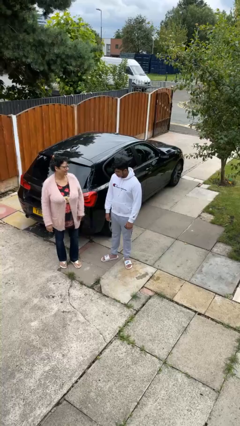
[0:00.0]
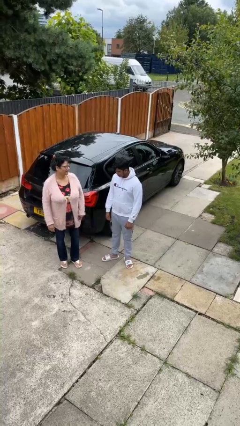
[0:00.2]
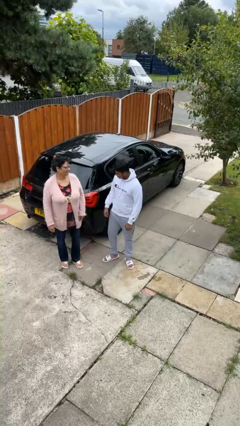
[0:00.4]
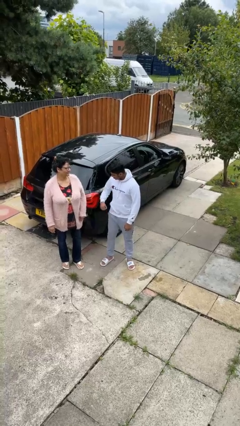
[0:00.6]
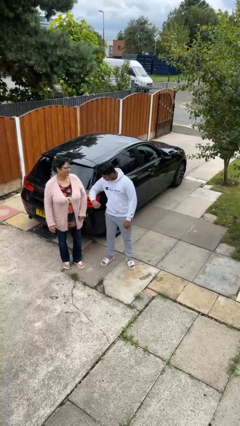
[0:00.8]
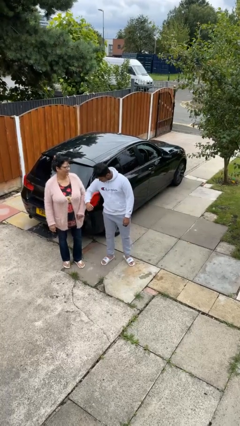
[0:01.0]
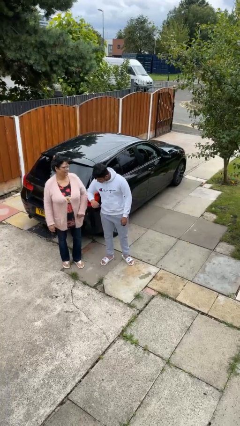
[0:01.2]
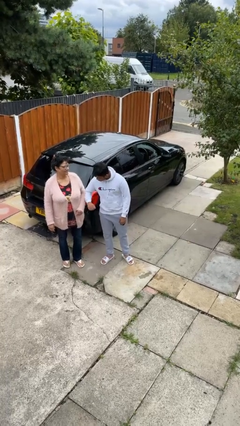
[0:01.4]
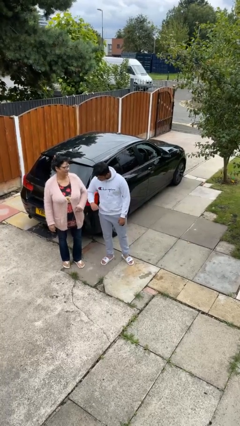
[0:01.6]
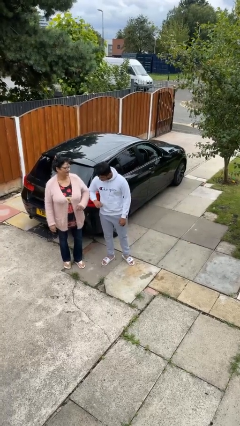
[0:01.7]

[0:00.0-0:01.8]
person nudges person with elbow

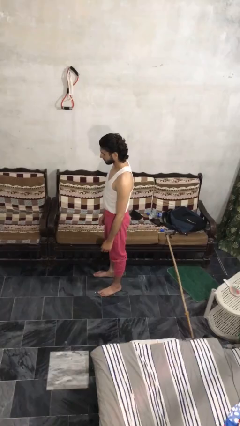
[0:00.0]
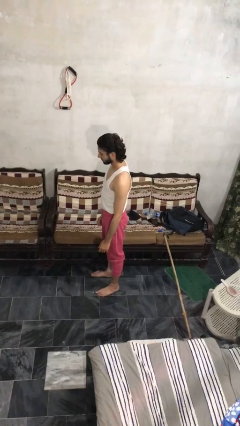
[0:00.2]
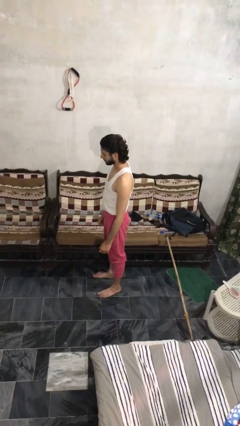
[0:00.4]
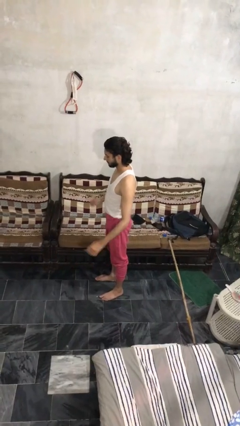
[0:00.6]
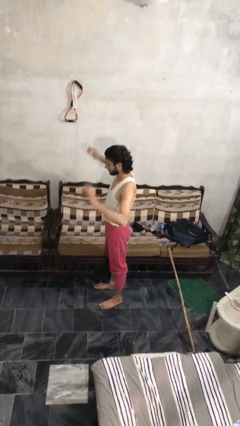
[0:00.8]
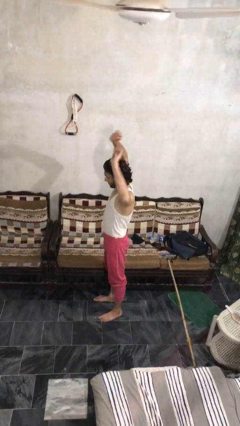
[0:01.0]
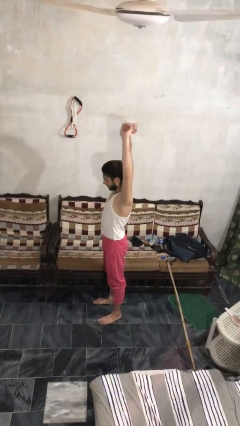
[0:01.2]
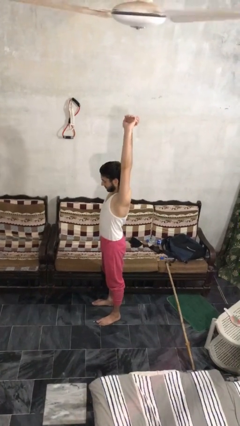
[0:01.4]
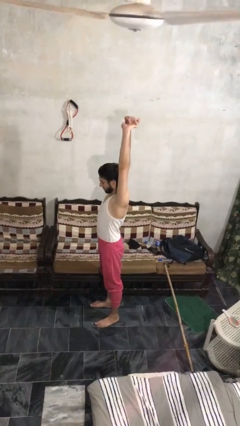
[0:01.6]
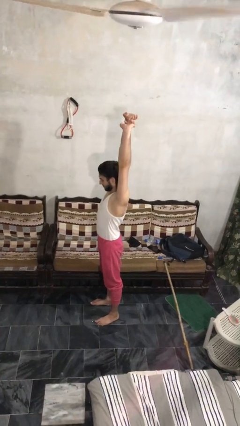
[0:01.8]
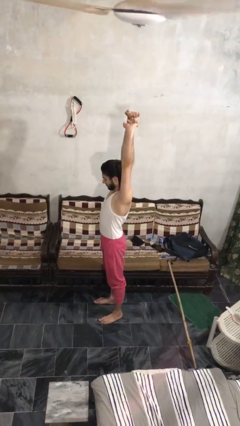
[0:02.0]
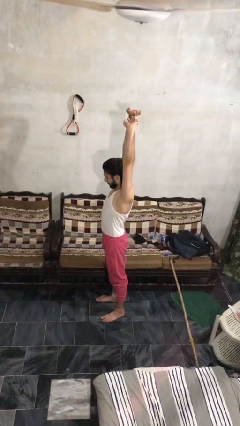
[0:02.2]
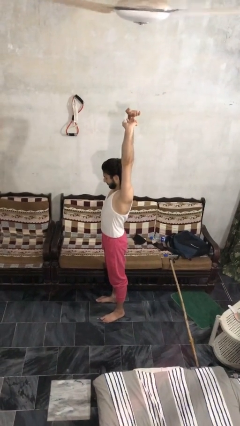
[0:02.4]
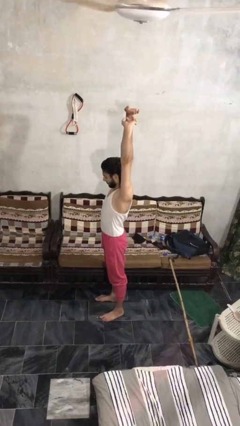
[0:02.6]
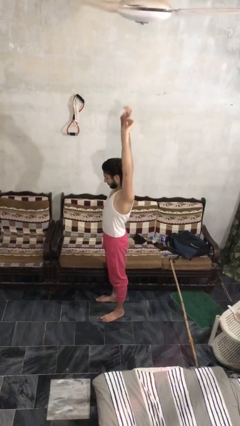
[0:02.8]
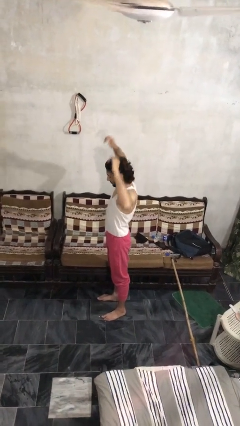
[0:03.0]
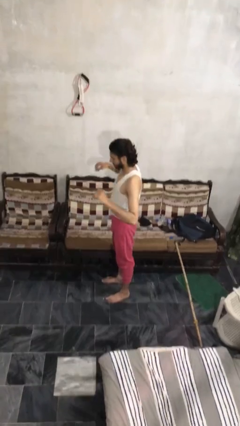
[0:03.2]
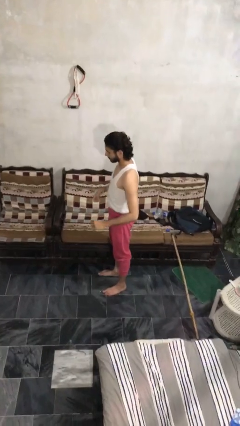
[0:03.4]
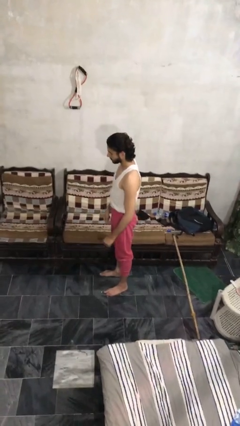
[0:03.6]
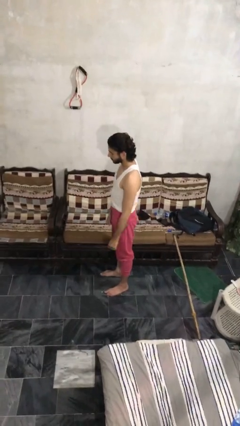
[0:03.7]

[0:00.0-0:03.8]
person stretches arms over head

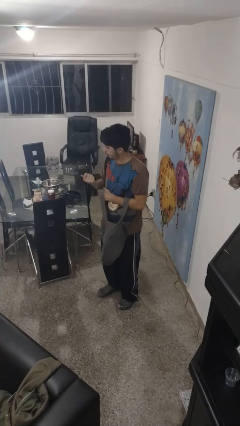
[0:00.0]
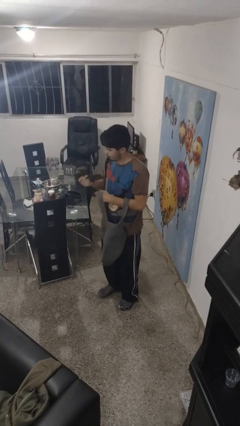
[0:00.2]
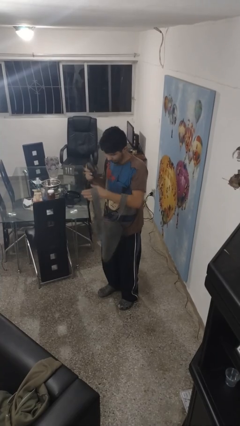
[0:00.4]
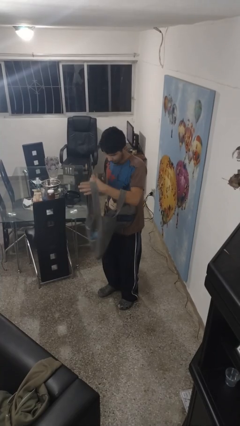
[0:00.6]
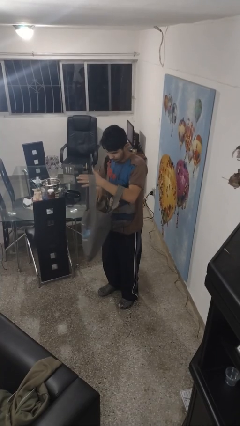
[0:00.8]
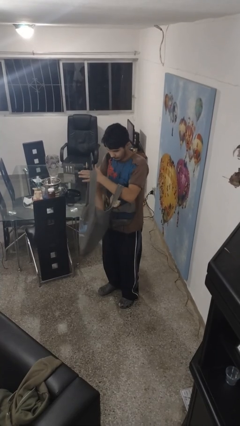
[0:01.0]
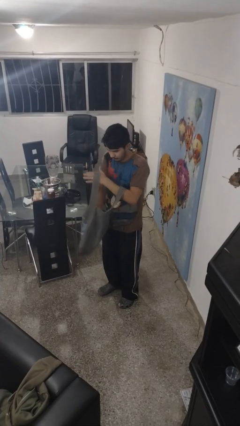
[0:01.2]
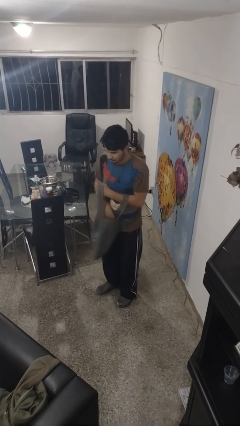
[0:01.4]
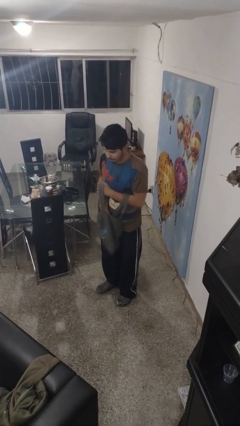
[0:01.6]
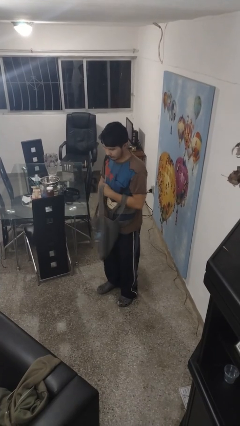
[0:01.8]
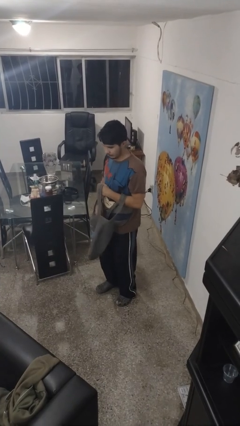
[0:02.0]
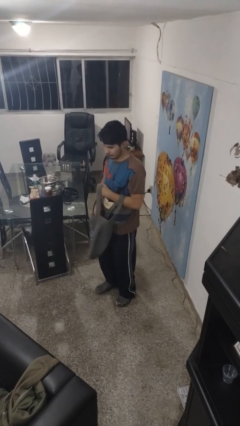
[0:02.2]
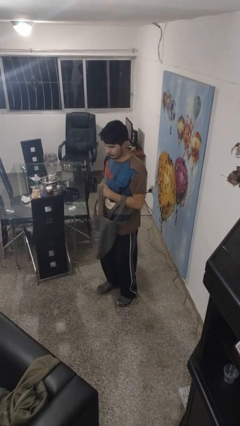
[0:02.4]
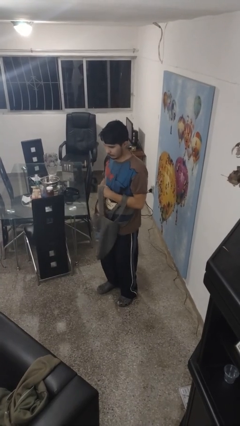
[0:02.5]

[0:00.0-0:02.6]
person puts object into purse

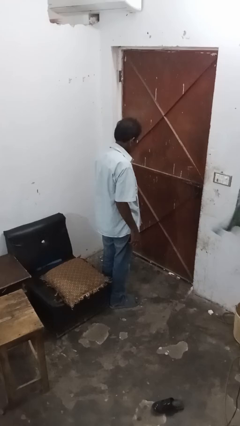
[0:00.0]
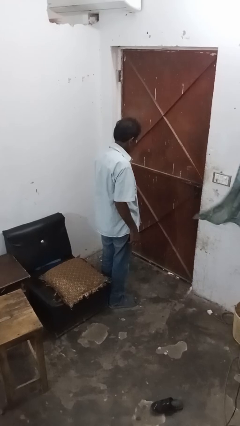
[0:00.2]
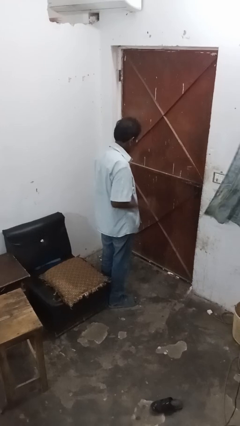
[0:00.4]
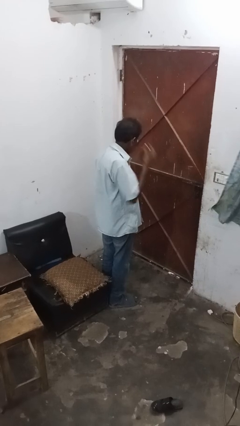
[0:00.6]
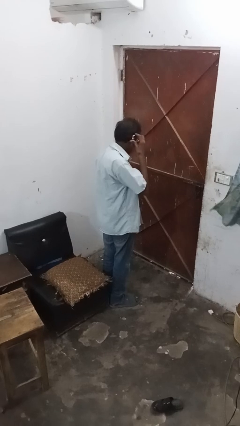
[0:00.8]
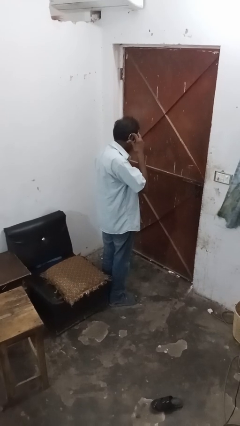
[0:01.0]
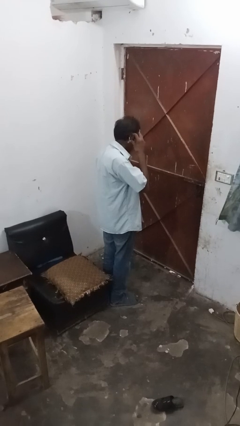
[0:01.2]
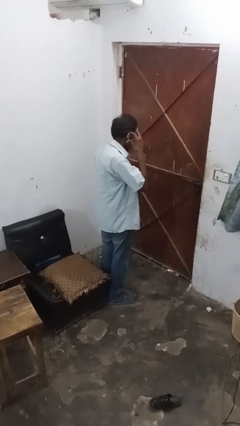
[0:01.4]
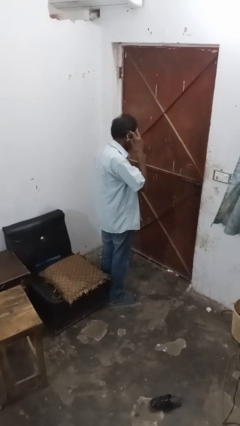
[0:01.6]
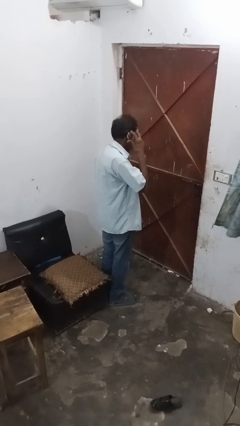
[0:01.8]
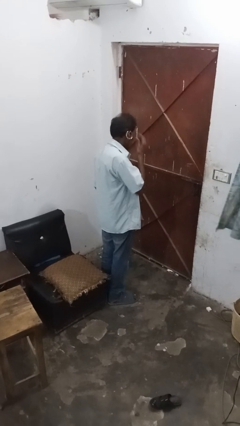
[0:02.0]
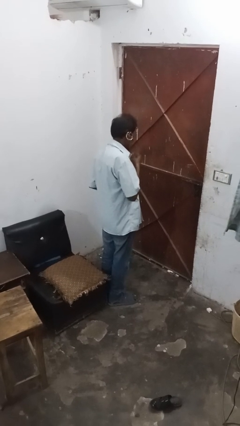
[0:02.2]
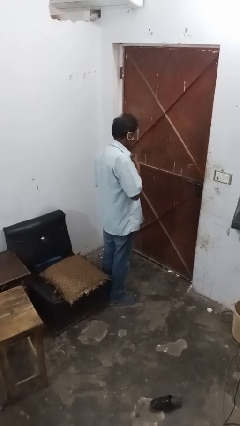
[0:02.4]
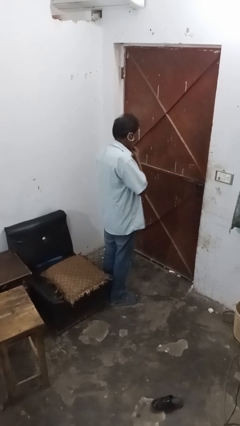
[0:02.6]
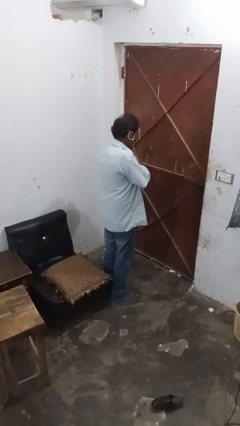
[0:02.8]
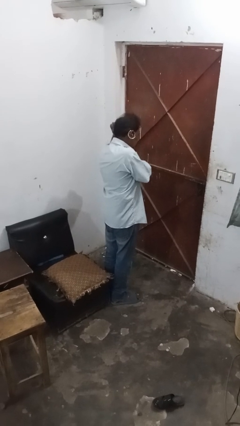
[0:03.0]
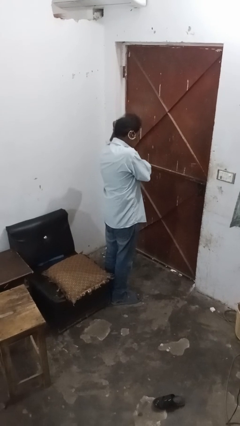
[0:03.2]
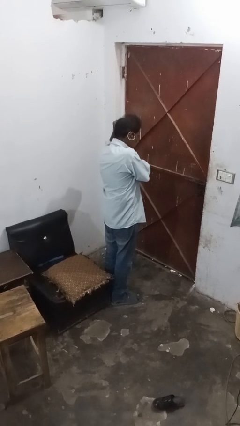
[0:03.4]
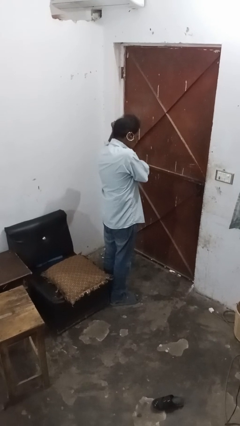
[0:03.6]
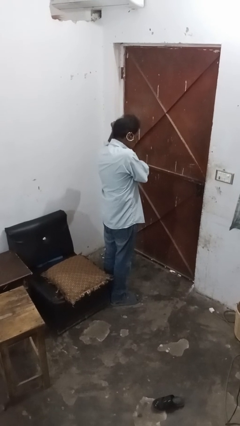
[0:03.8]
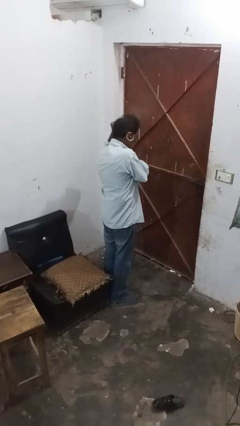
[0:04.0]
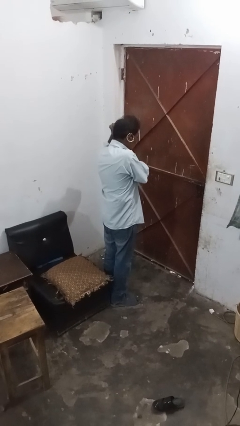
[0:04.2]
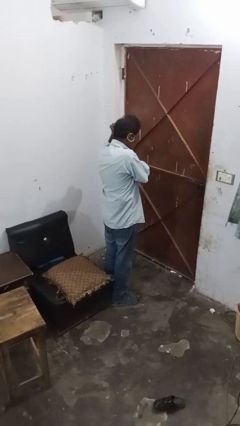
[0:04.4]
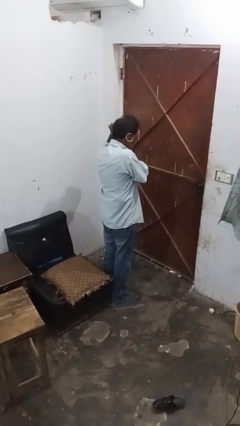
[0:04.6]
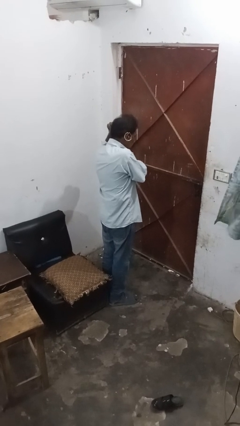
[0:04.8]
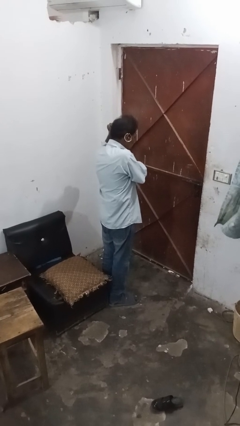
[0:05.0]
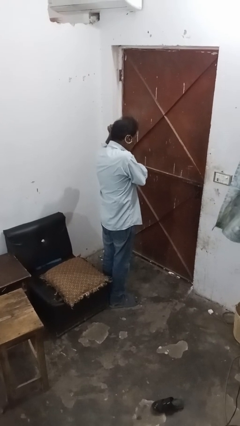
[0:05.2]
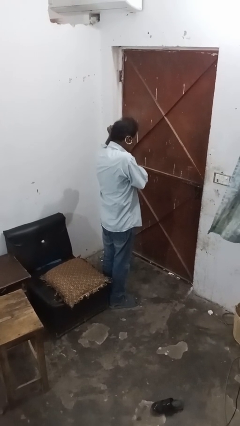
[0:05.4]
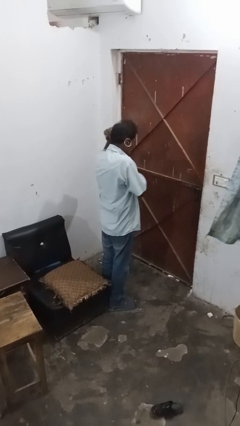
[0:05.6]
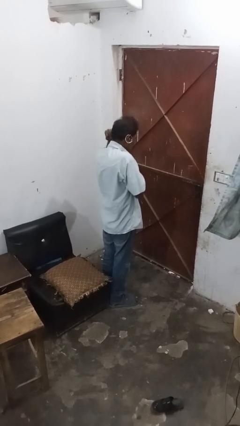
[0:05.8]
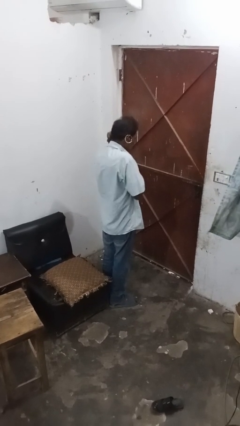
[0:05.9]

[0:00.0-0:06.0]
person puts on earrings

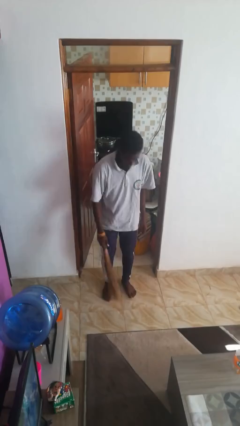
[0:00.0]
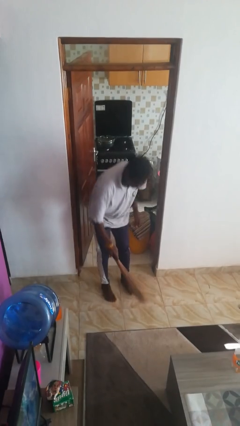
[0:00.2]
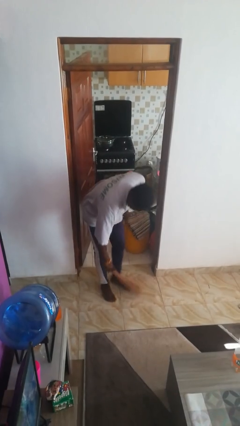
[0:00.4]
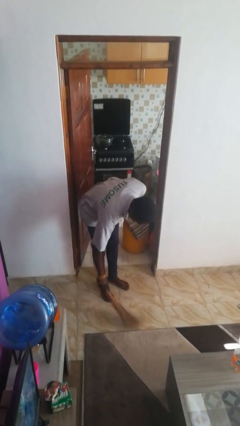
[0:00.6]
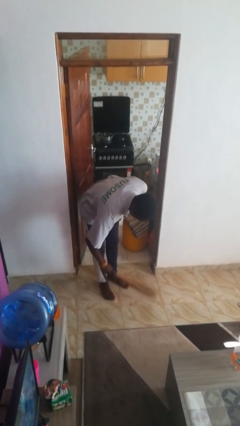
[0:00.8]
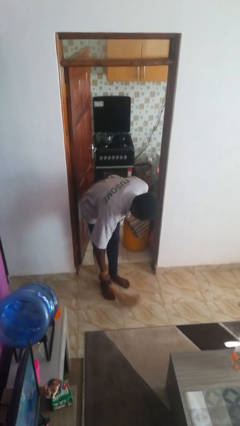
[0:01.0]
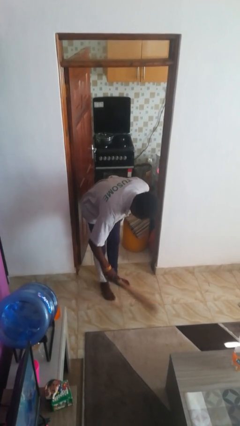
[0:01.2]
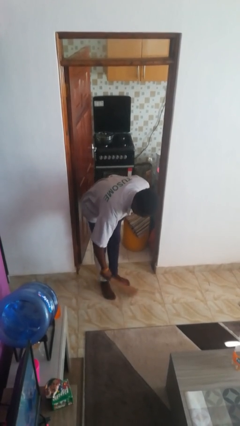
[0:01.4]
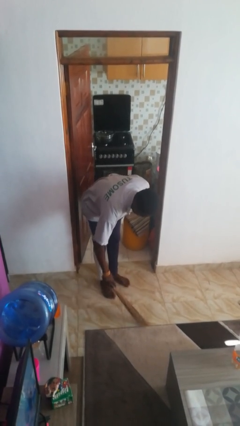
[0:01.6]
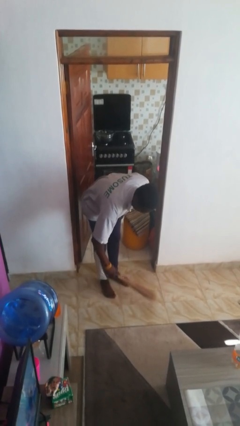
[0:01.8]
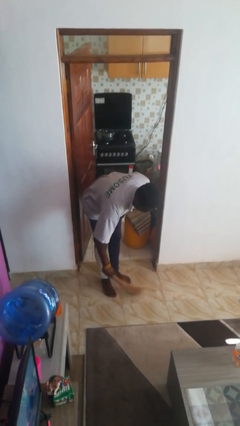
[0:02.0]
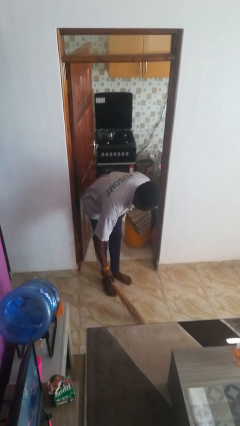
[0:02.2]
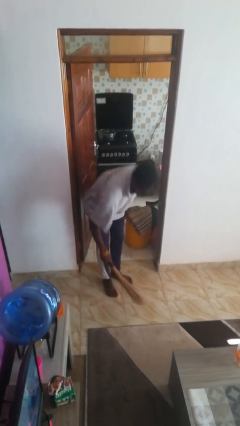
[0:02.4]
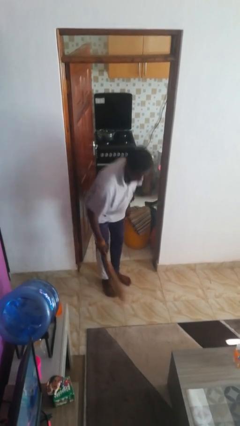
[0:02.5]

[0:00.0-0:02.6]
person sweeps floor

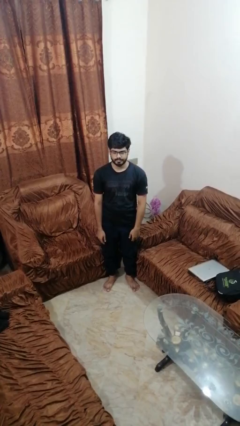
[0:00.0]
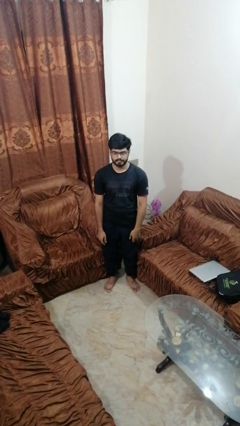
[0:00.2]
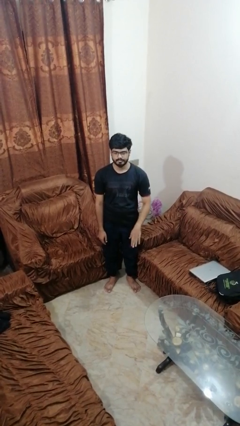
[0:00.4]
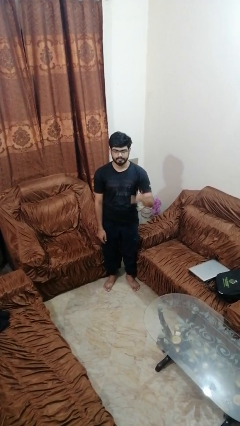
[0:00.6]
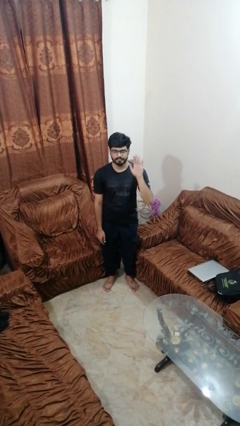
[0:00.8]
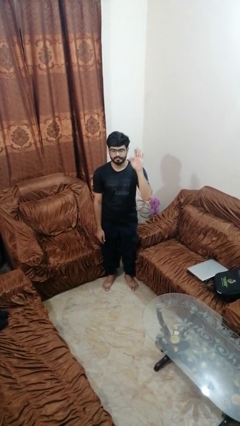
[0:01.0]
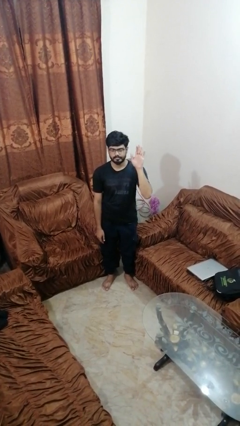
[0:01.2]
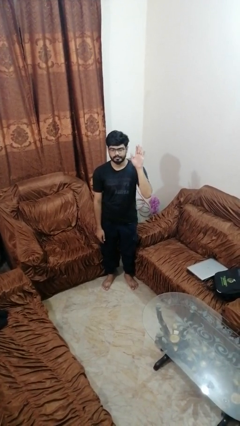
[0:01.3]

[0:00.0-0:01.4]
person gestures raise hand
